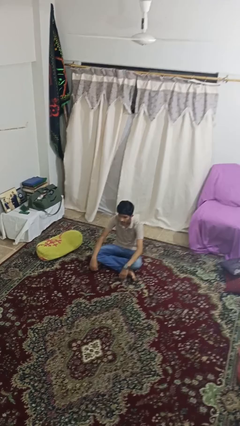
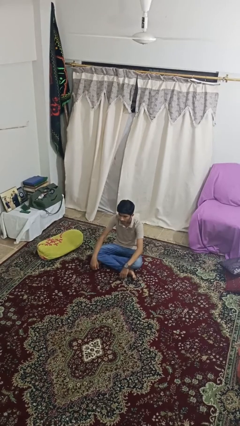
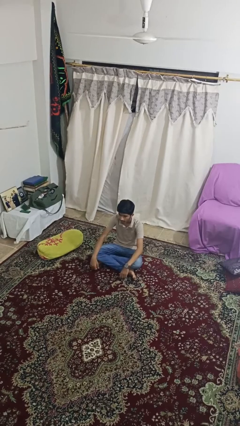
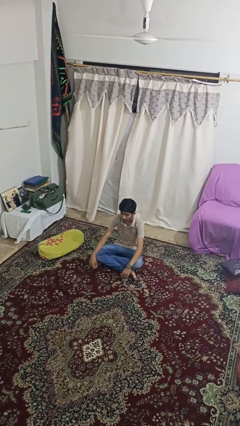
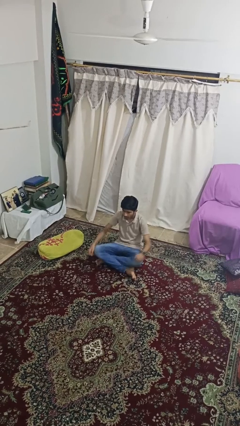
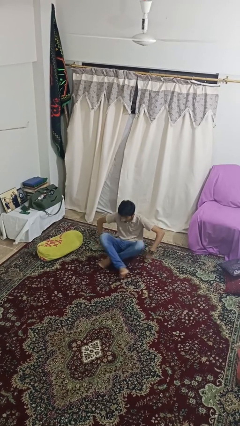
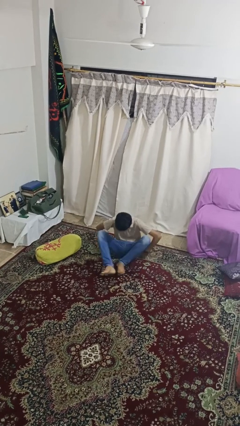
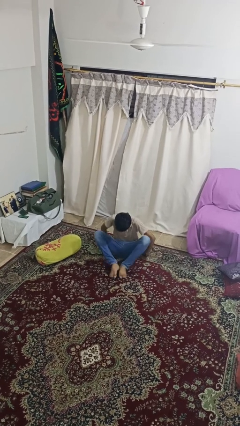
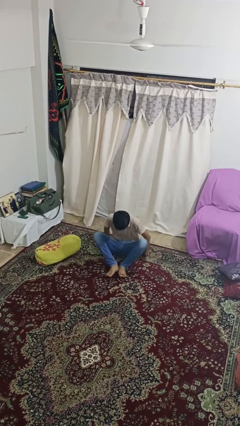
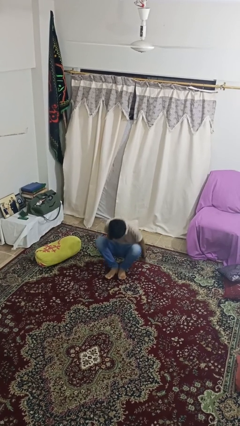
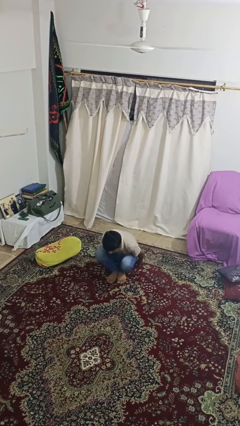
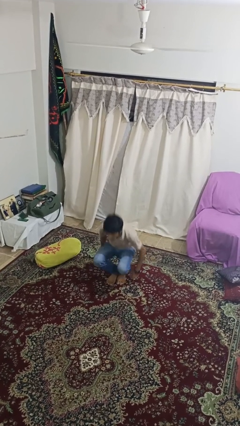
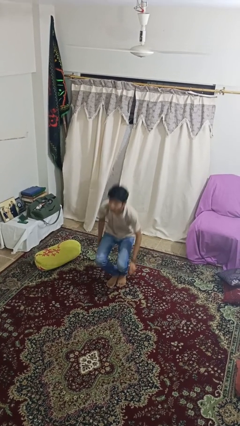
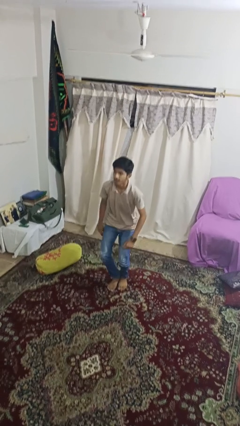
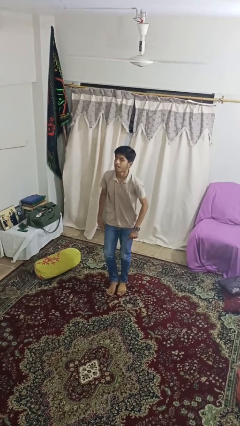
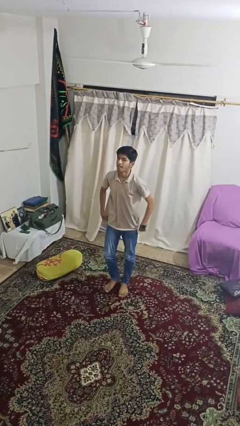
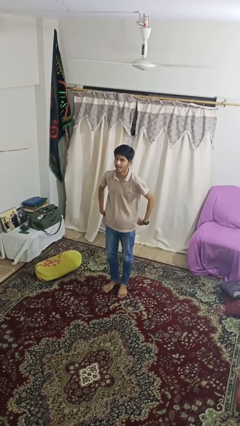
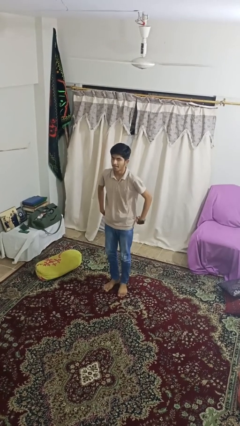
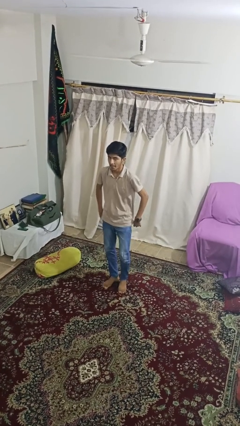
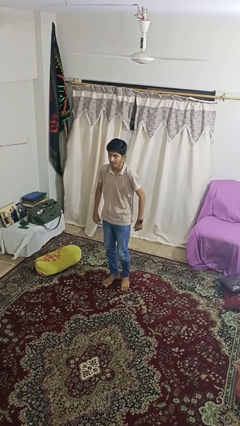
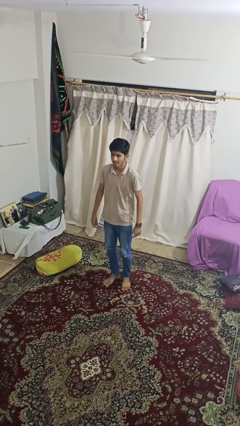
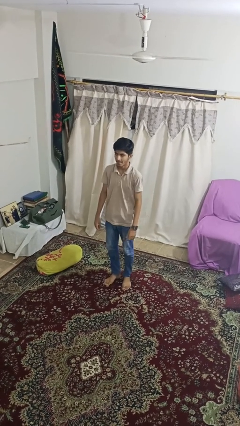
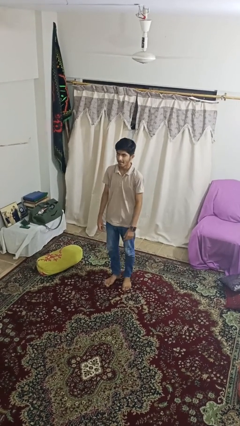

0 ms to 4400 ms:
person stands up from floor

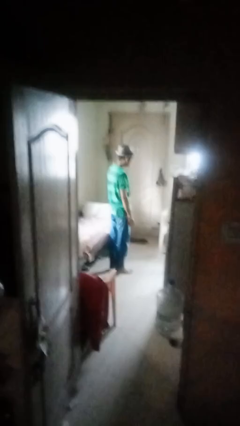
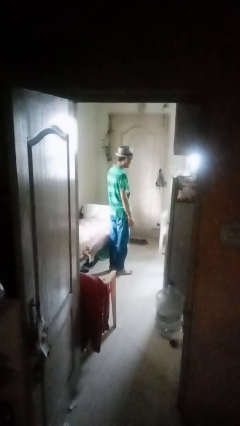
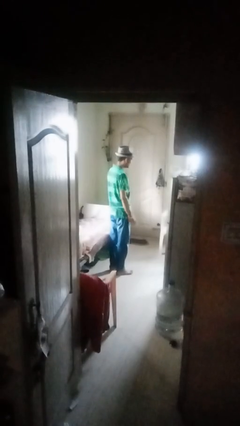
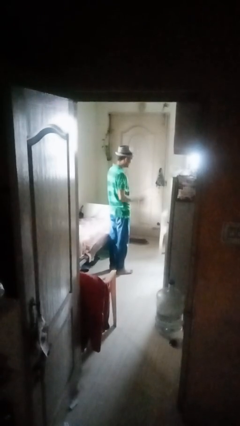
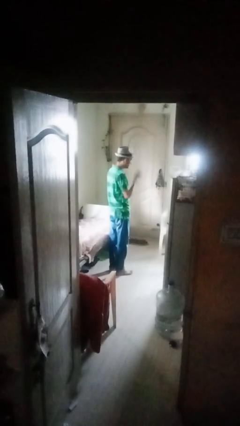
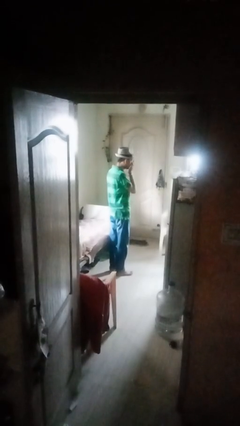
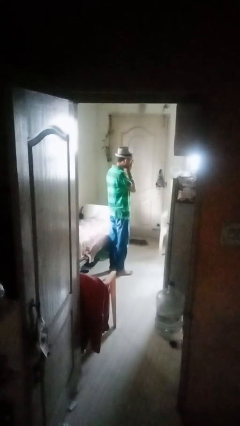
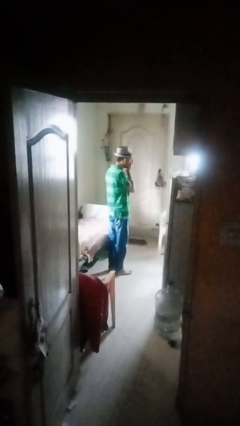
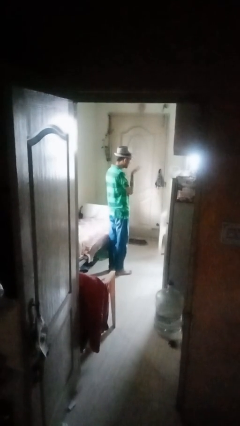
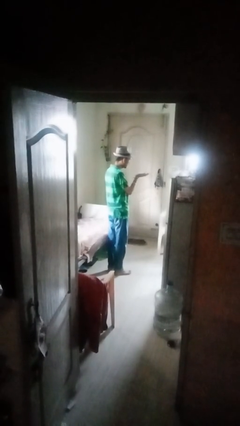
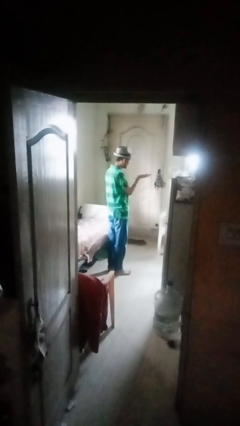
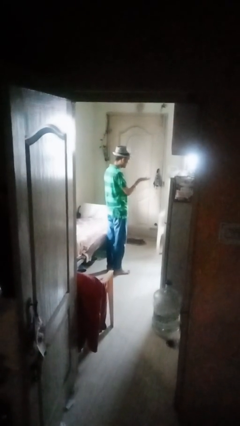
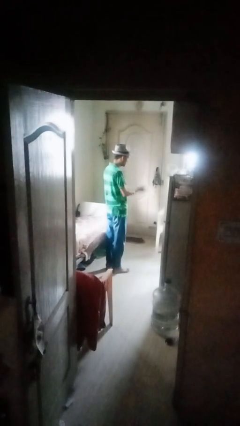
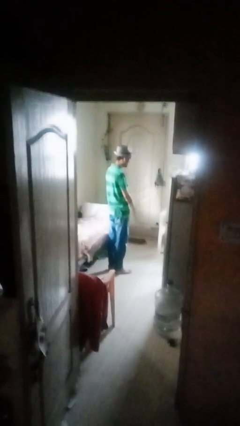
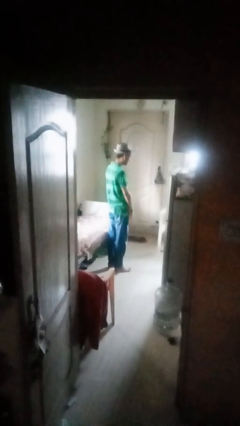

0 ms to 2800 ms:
person gestures blow kiss

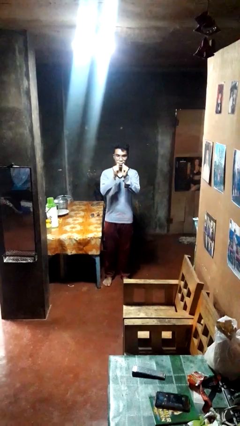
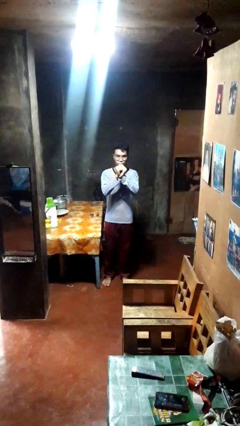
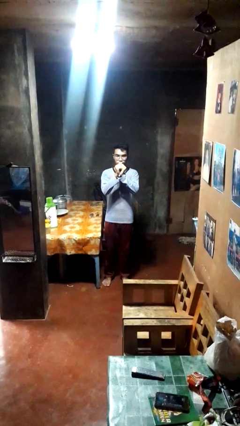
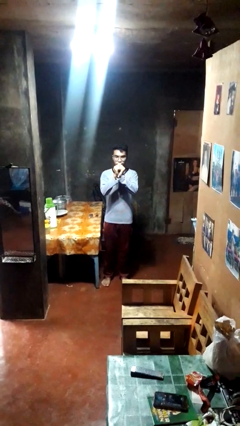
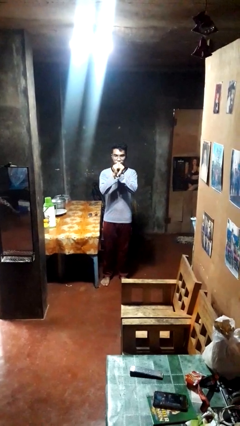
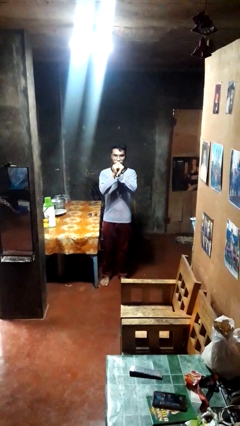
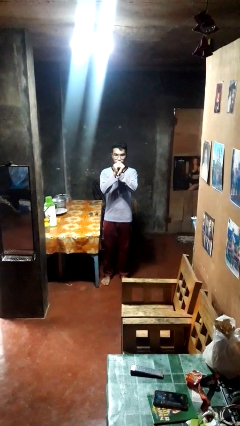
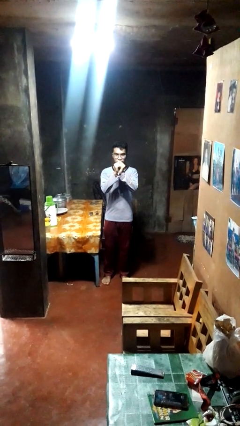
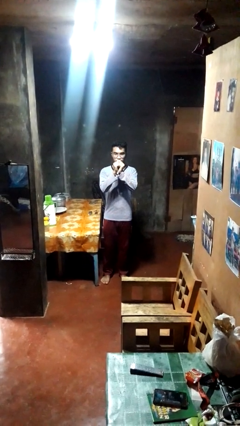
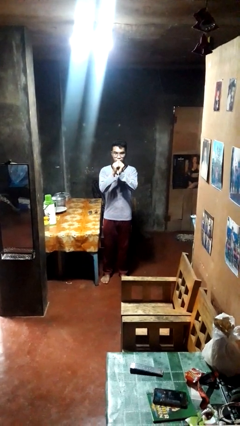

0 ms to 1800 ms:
person gestures zoom out

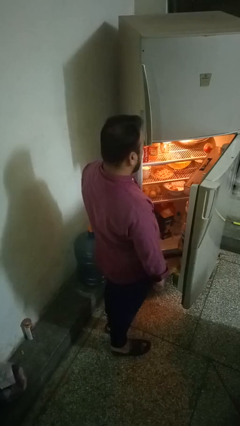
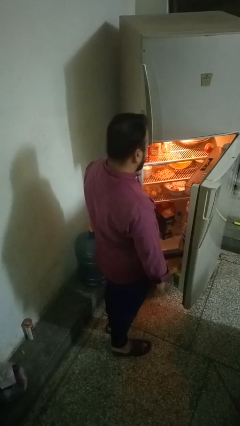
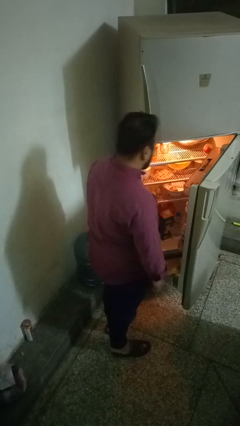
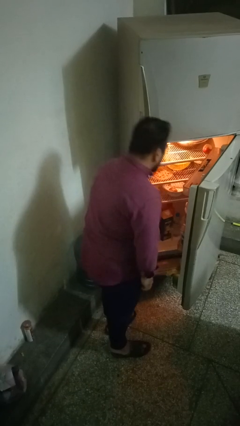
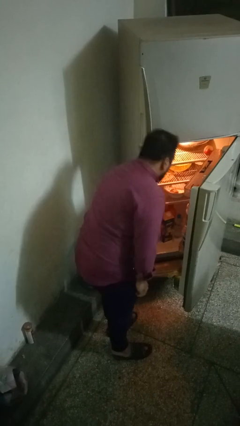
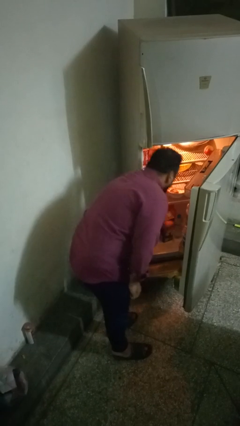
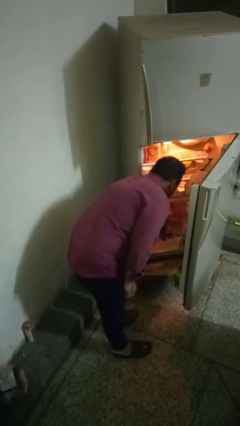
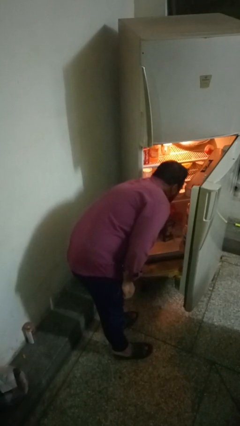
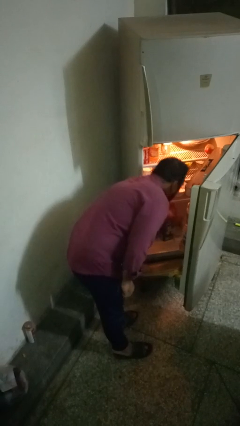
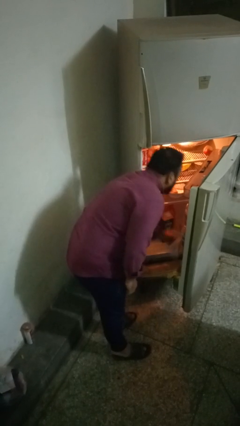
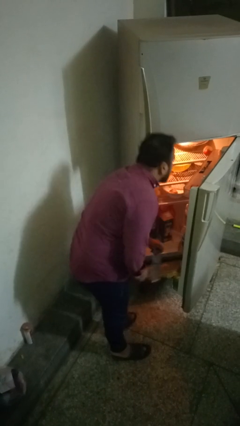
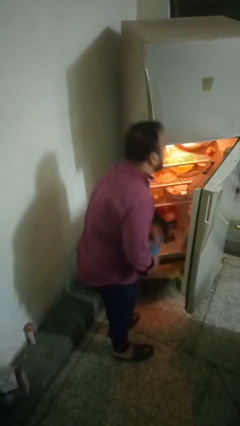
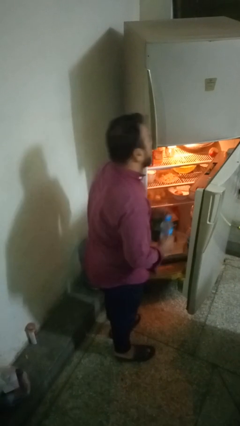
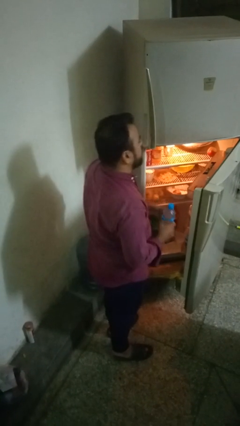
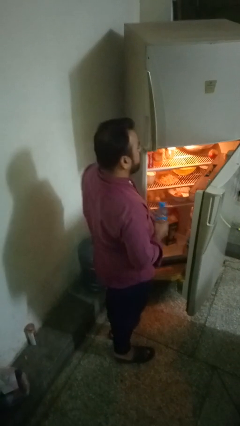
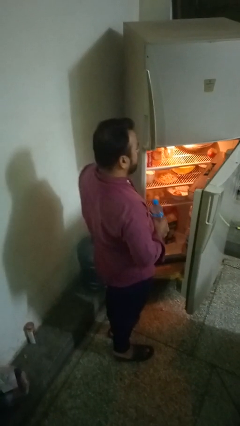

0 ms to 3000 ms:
person takes object from refrigerator

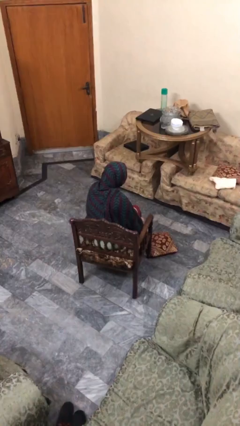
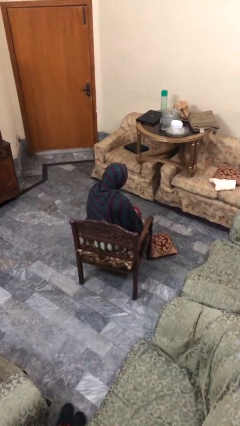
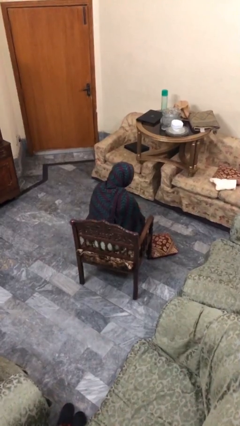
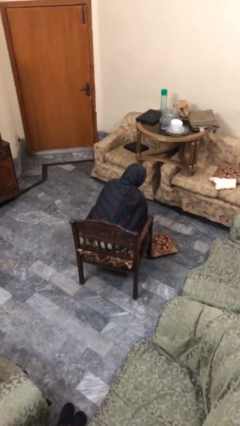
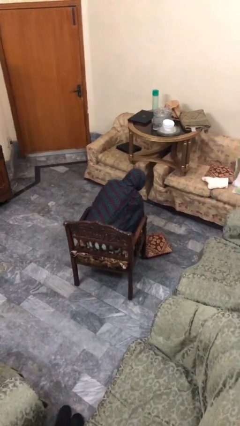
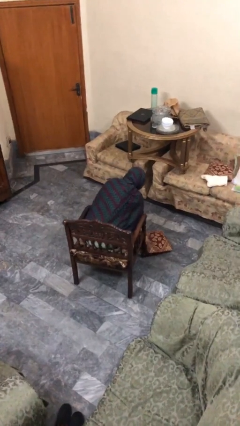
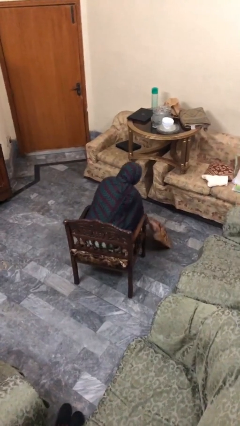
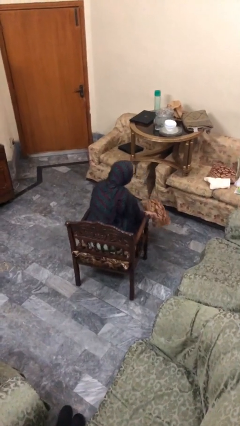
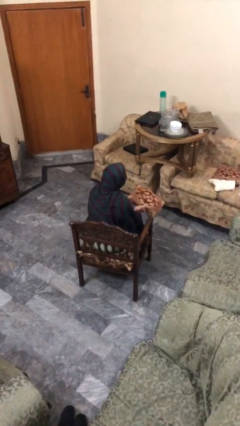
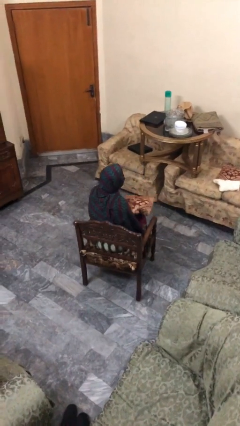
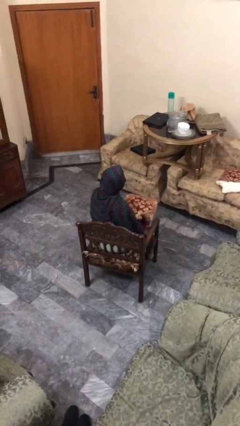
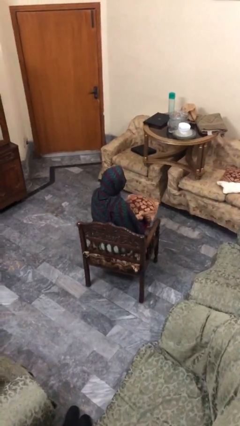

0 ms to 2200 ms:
person picks up object from floor

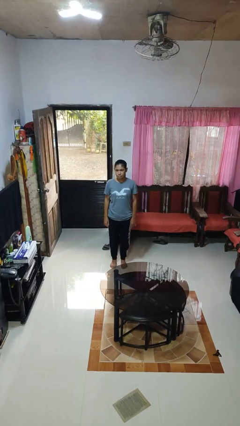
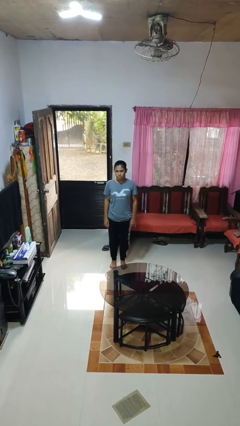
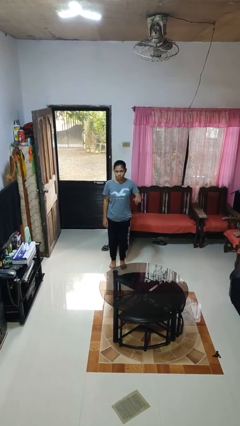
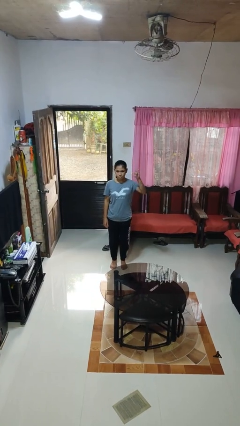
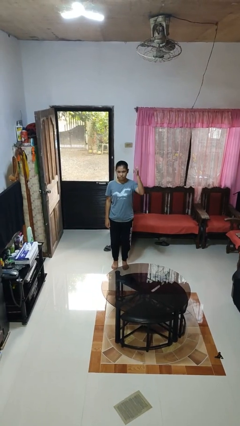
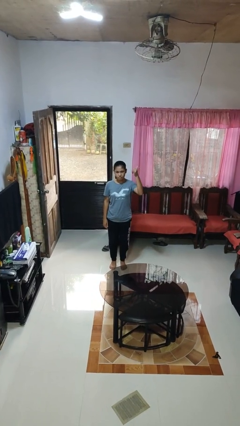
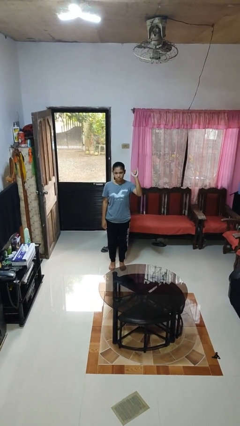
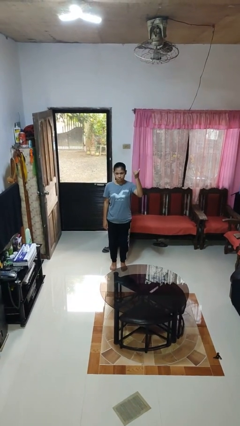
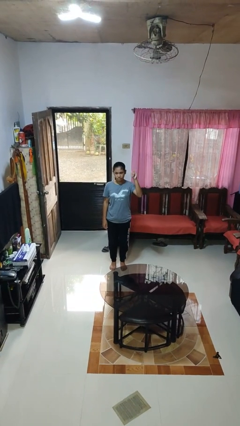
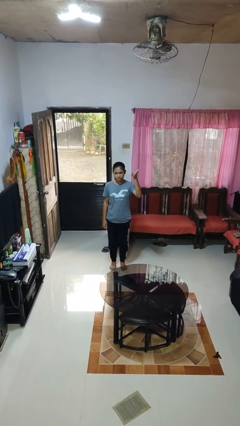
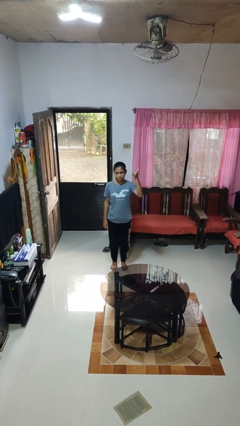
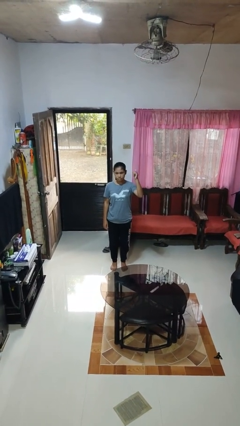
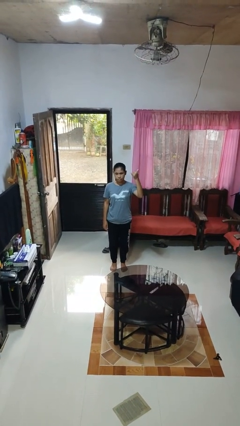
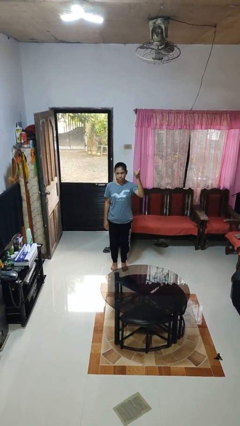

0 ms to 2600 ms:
person gestures hang loose

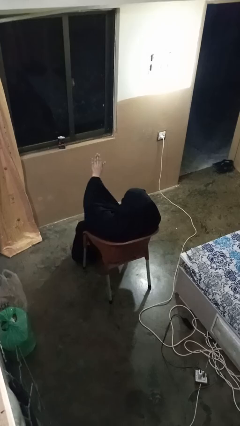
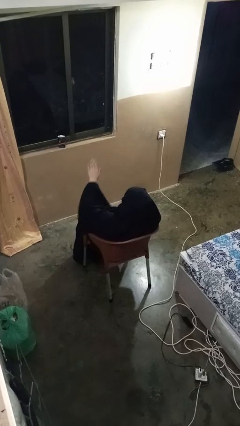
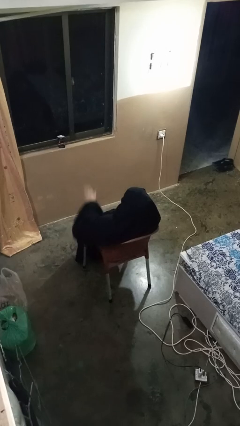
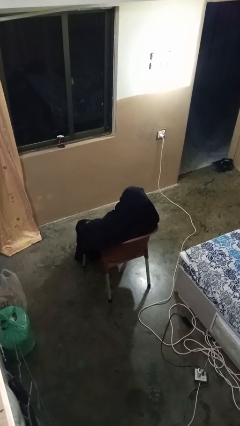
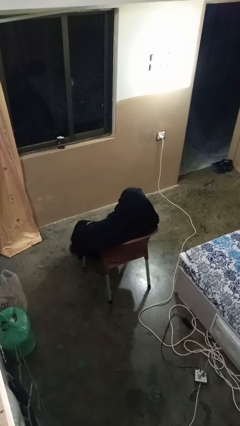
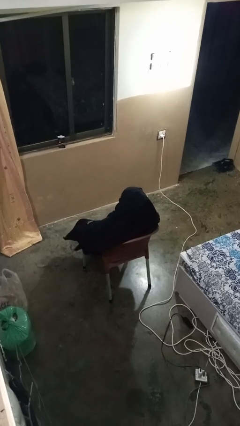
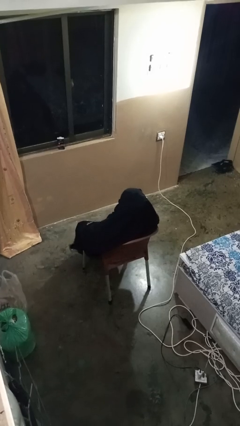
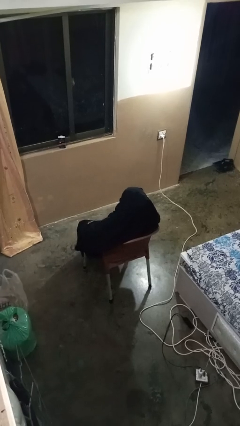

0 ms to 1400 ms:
person gestures lower hand
